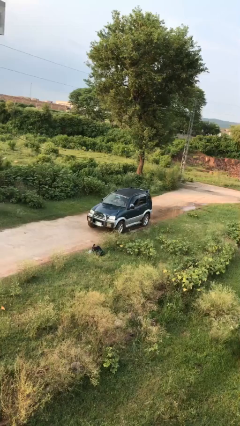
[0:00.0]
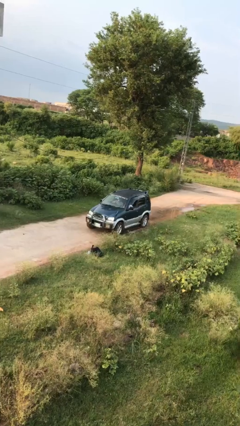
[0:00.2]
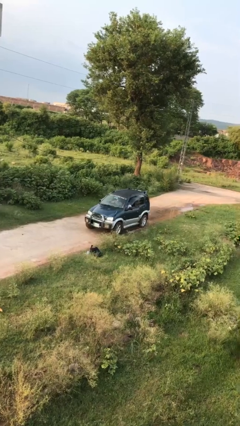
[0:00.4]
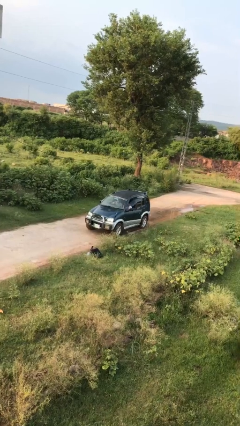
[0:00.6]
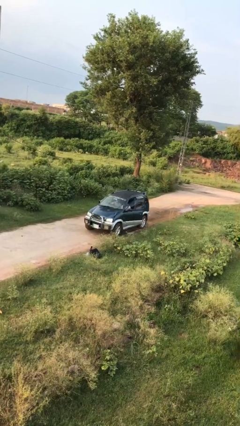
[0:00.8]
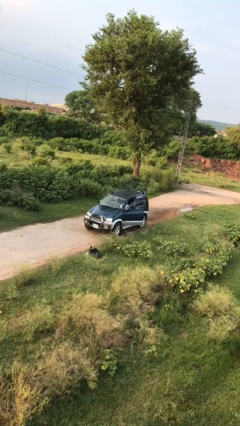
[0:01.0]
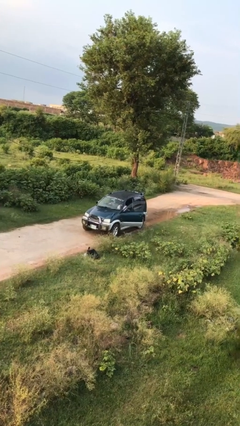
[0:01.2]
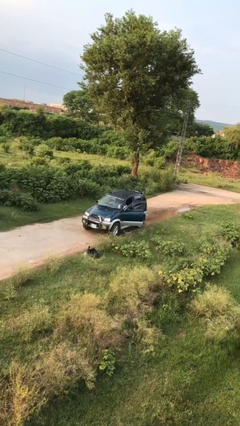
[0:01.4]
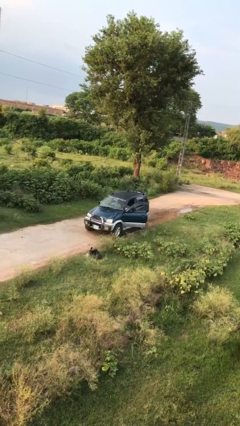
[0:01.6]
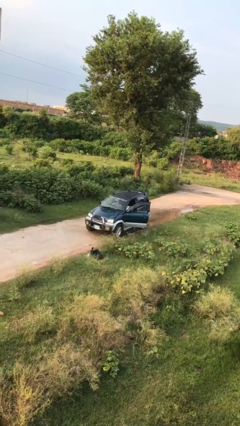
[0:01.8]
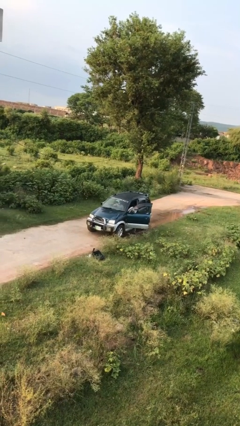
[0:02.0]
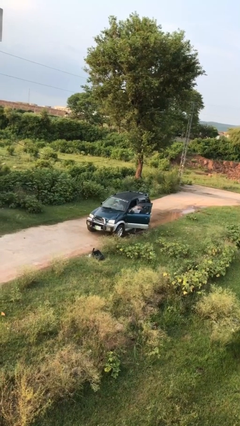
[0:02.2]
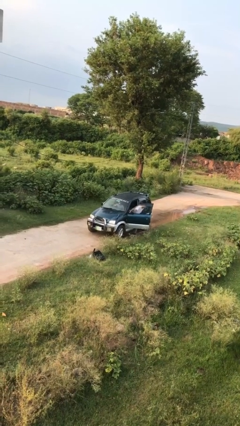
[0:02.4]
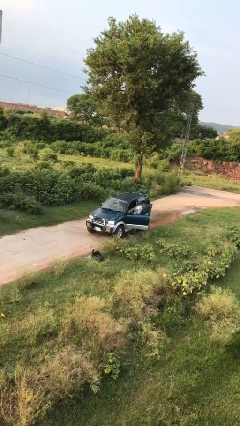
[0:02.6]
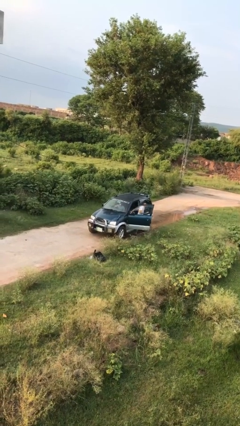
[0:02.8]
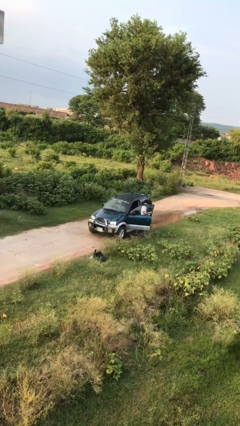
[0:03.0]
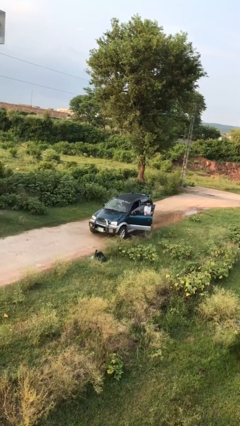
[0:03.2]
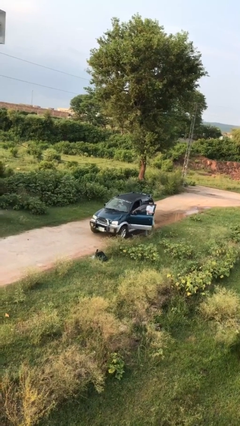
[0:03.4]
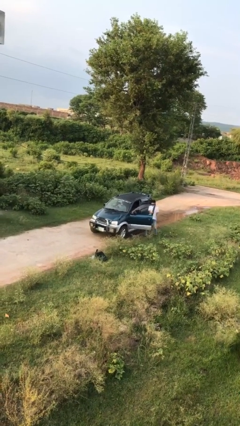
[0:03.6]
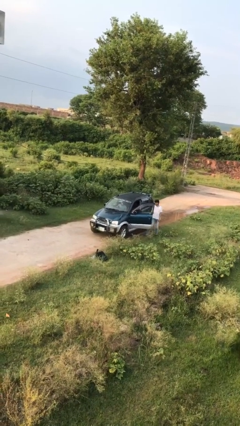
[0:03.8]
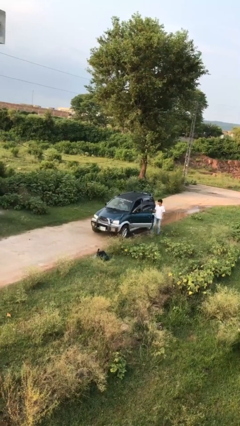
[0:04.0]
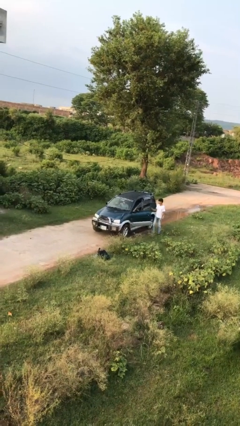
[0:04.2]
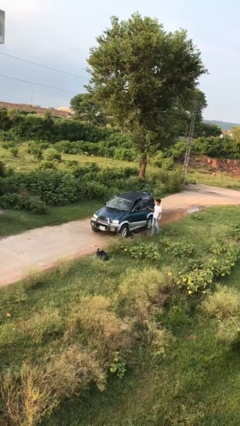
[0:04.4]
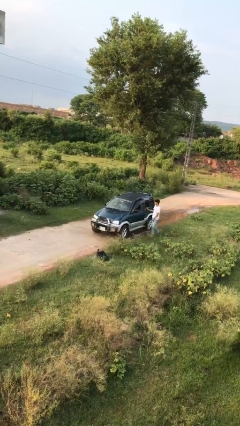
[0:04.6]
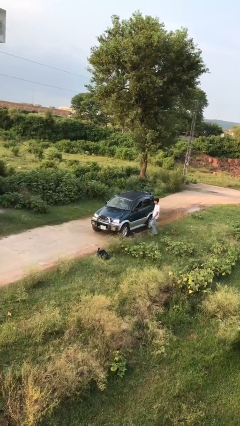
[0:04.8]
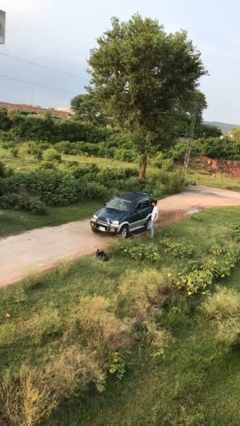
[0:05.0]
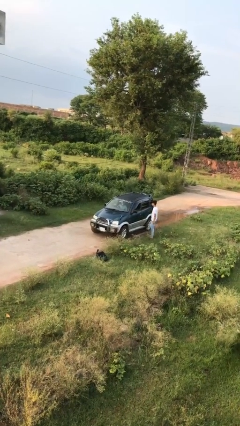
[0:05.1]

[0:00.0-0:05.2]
car drops off person

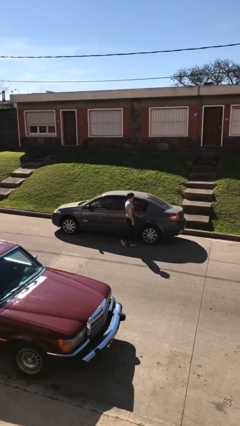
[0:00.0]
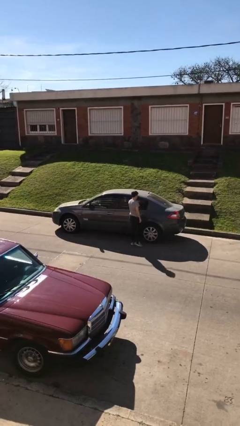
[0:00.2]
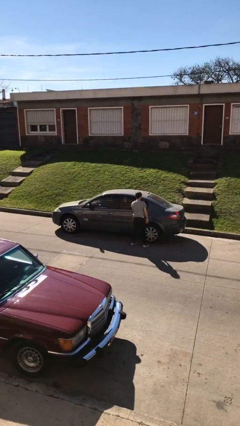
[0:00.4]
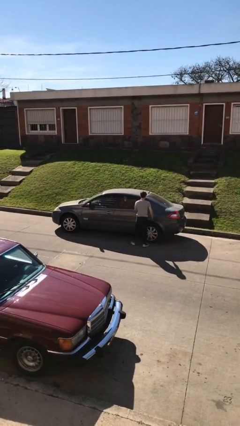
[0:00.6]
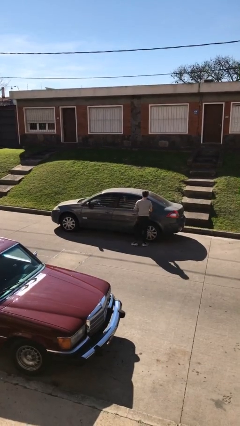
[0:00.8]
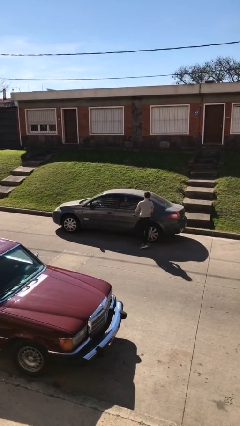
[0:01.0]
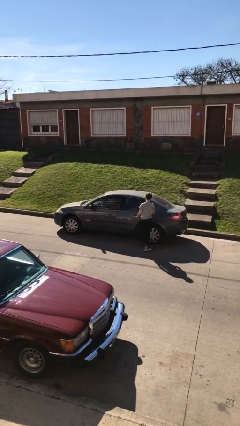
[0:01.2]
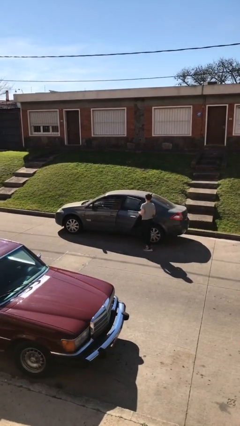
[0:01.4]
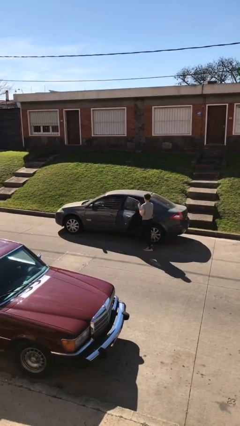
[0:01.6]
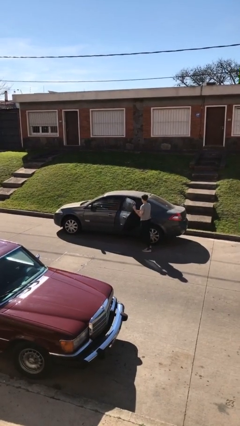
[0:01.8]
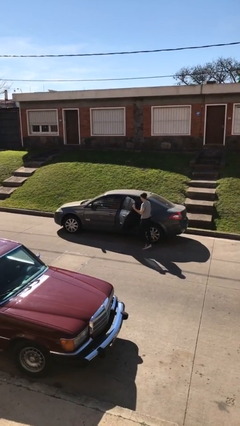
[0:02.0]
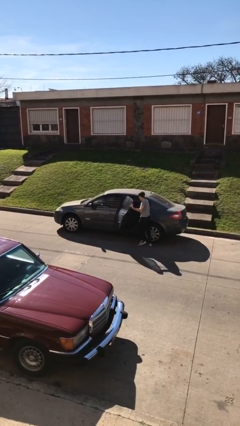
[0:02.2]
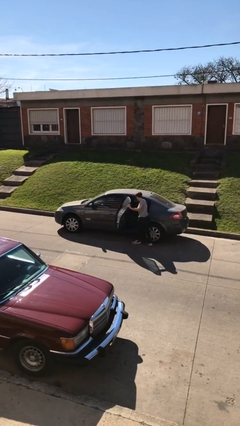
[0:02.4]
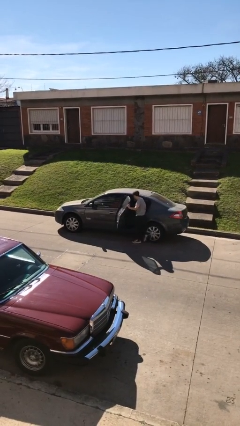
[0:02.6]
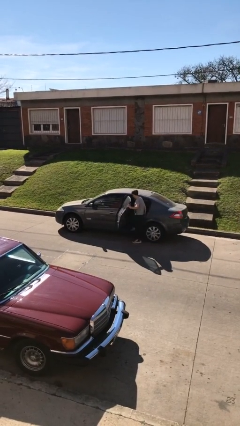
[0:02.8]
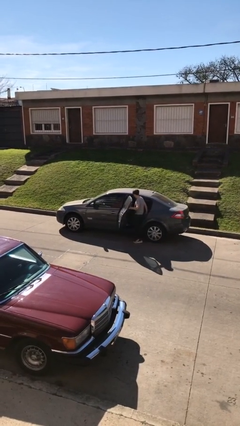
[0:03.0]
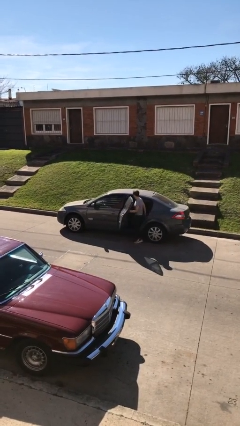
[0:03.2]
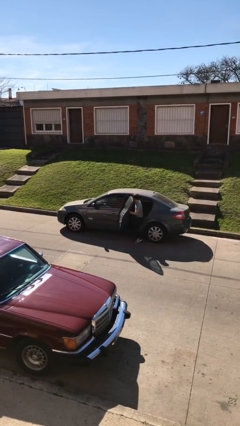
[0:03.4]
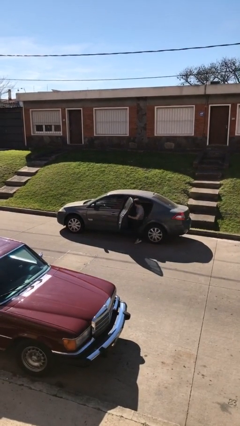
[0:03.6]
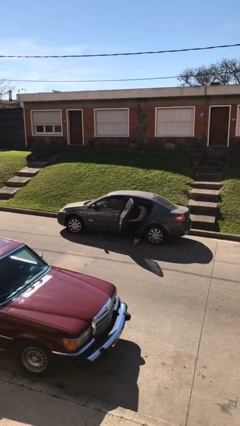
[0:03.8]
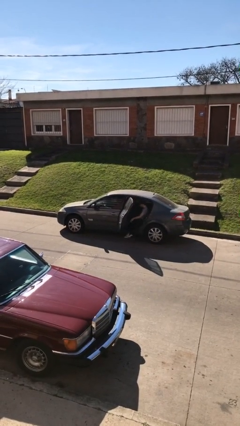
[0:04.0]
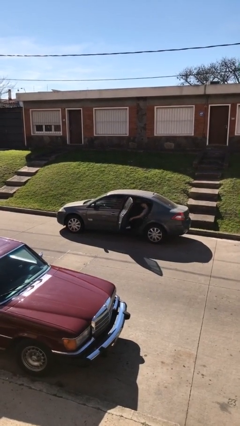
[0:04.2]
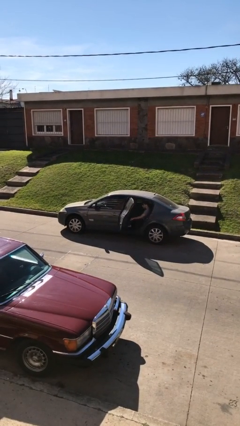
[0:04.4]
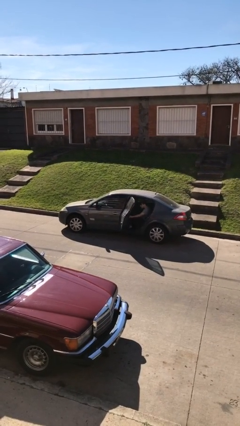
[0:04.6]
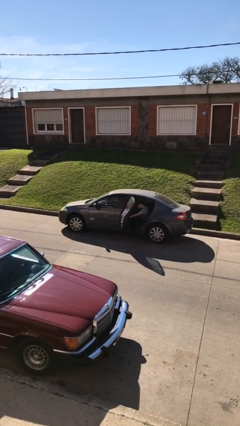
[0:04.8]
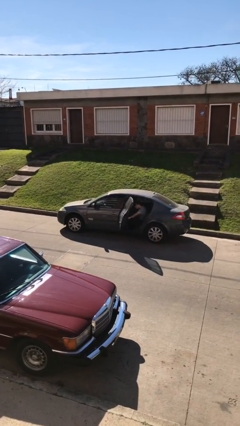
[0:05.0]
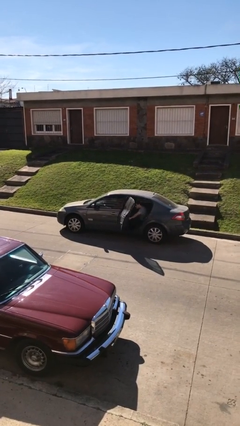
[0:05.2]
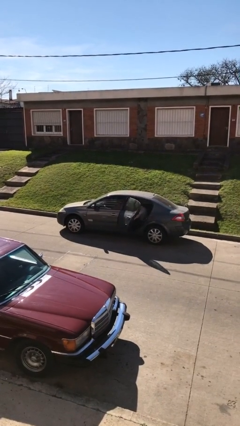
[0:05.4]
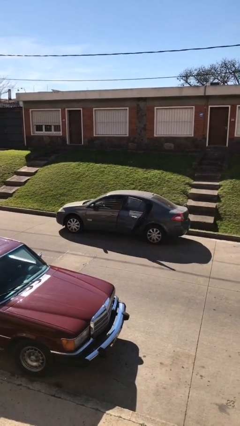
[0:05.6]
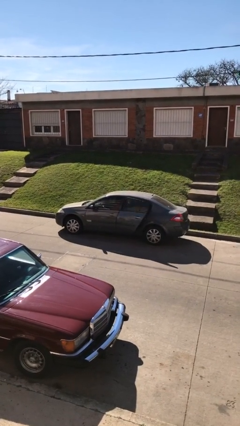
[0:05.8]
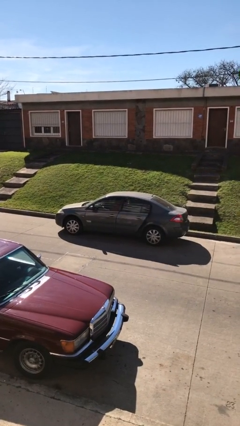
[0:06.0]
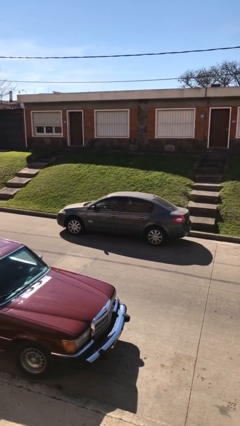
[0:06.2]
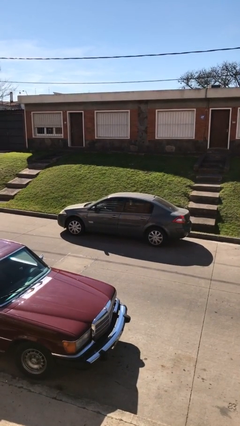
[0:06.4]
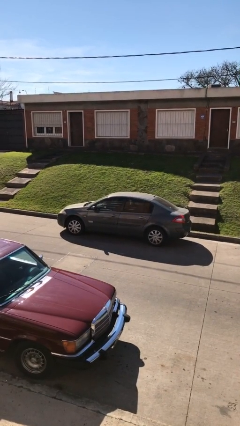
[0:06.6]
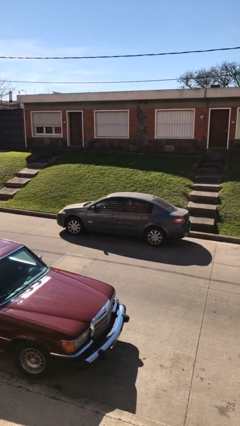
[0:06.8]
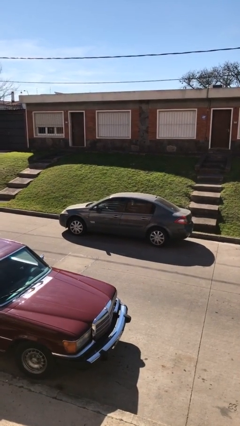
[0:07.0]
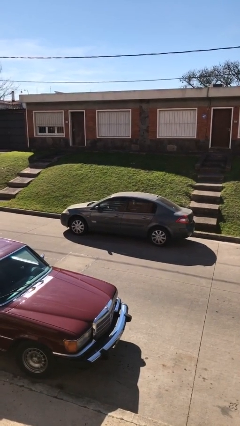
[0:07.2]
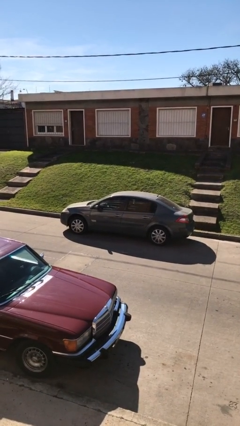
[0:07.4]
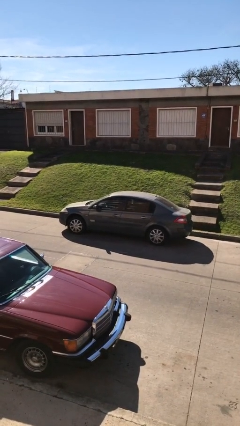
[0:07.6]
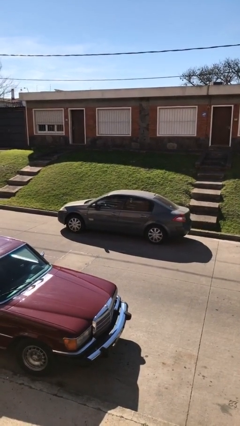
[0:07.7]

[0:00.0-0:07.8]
car picks up person

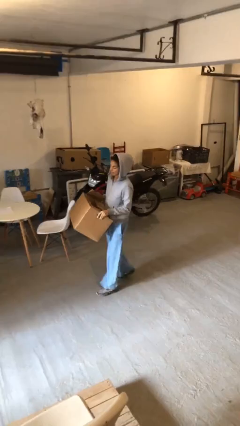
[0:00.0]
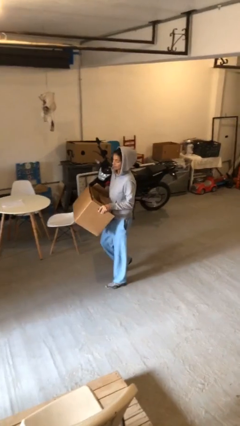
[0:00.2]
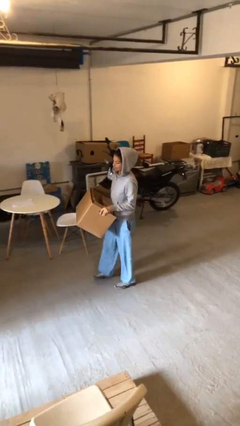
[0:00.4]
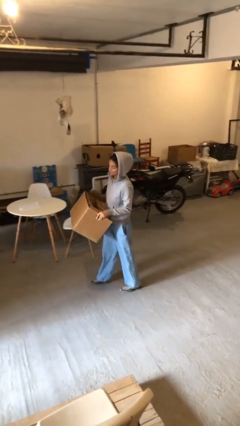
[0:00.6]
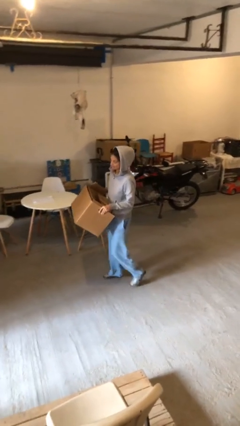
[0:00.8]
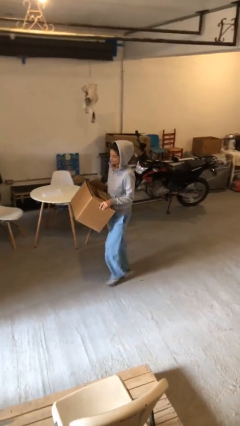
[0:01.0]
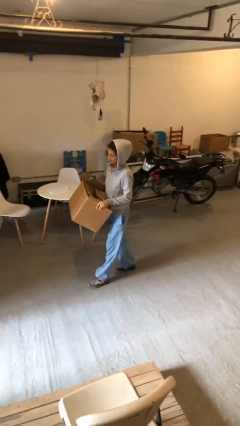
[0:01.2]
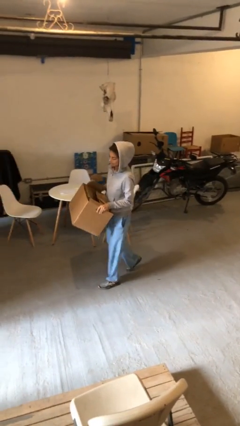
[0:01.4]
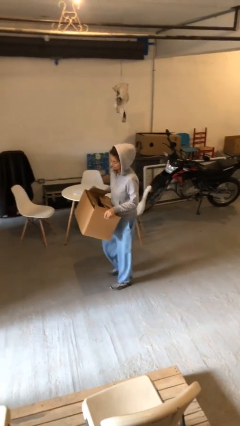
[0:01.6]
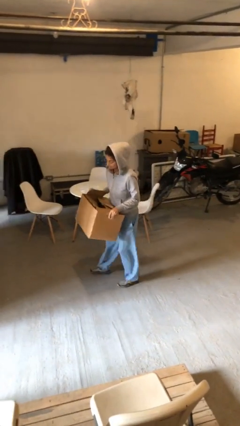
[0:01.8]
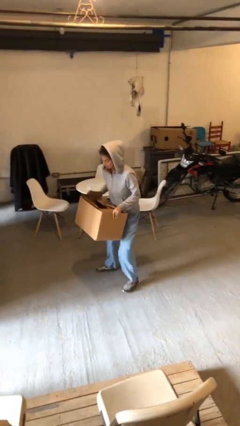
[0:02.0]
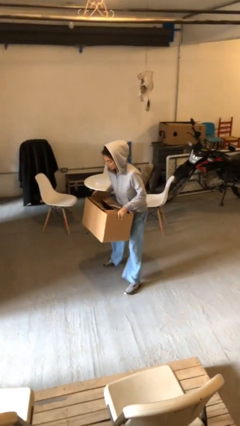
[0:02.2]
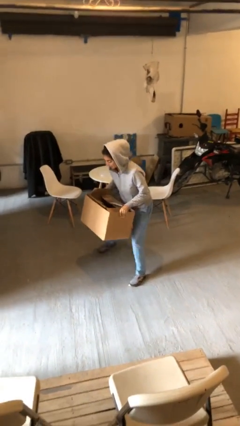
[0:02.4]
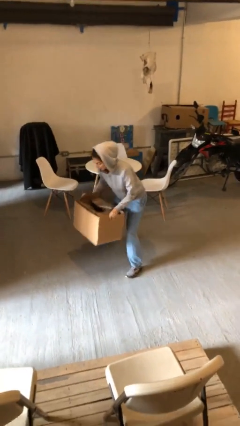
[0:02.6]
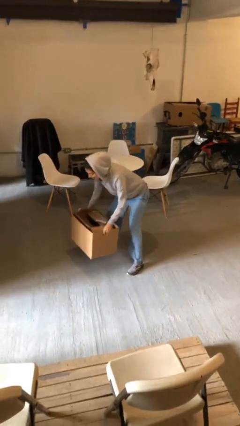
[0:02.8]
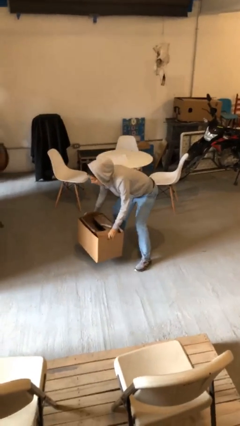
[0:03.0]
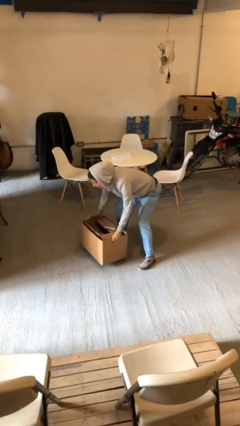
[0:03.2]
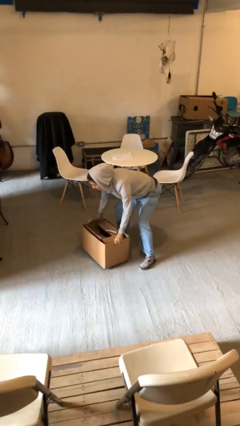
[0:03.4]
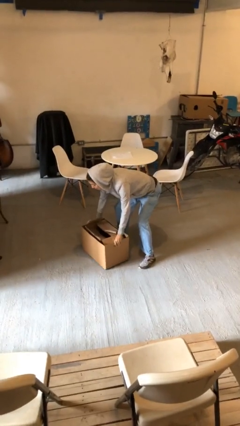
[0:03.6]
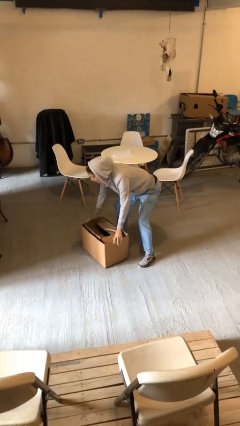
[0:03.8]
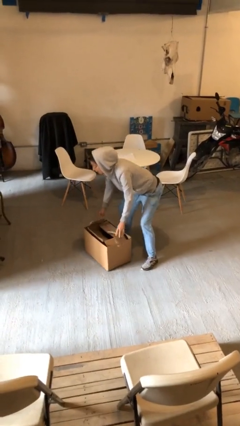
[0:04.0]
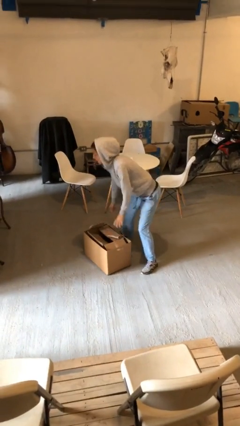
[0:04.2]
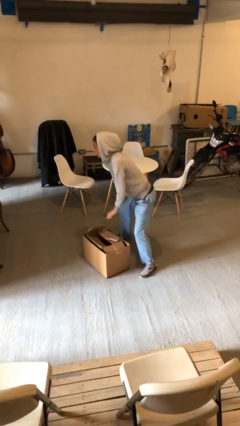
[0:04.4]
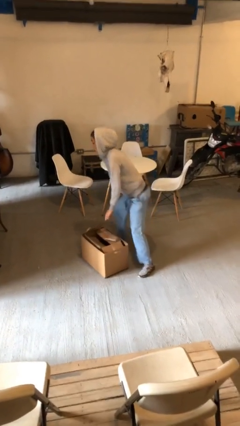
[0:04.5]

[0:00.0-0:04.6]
person puts down object on floor

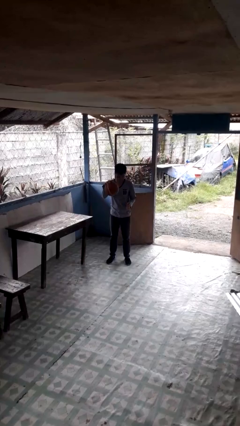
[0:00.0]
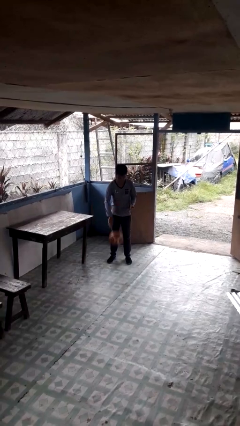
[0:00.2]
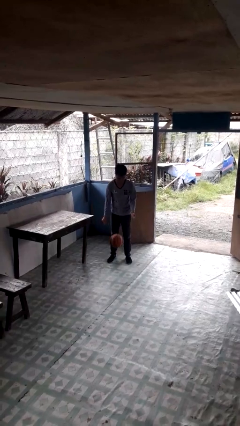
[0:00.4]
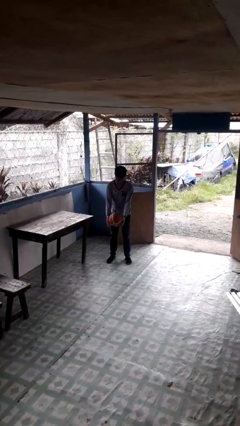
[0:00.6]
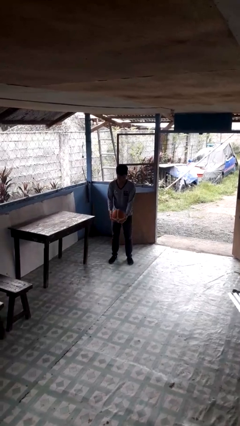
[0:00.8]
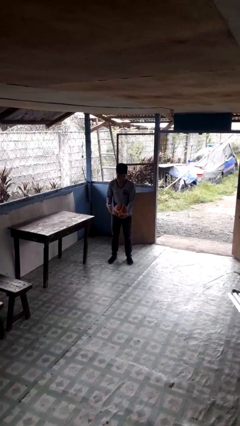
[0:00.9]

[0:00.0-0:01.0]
person bounces ball on floor
